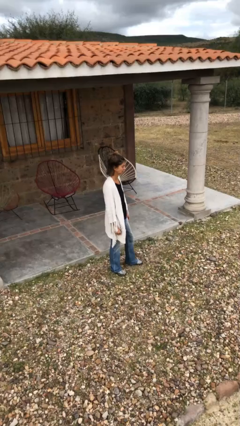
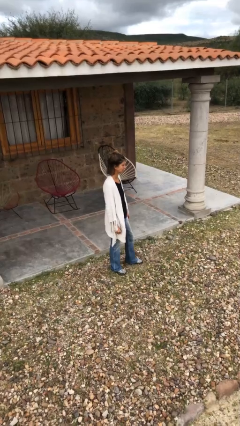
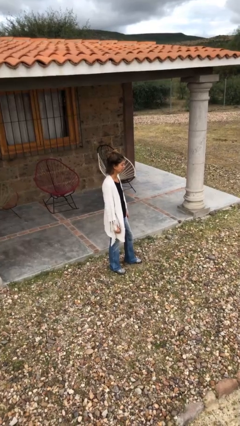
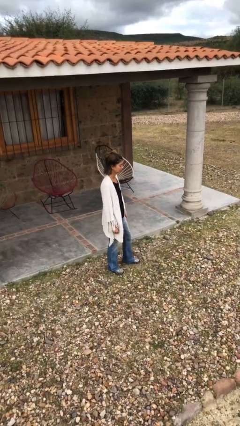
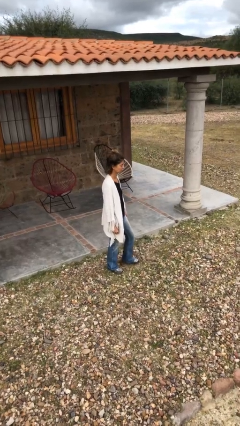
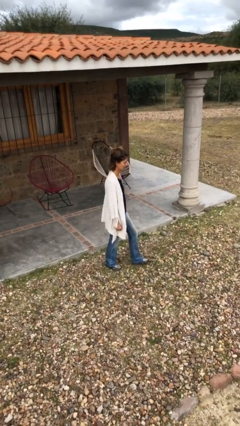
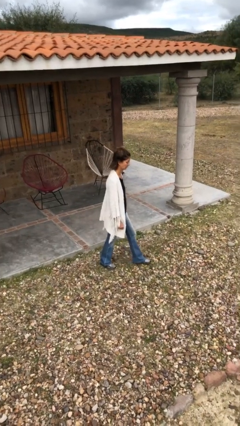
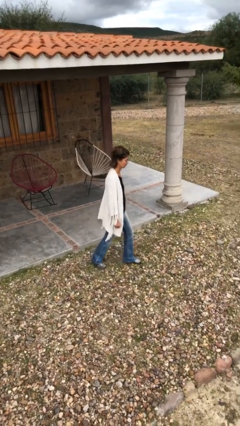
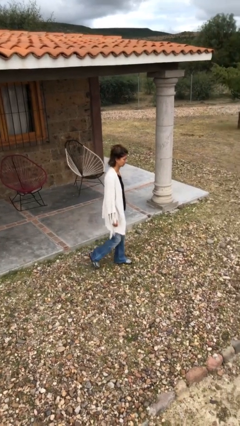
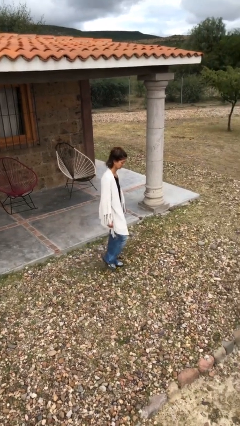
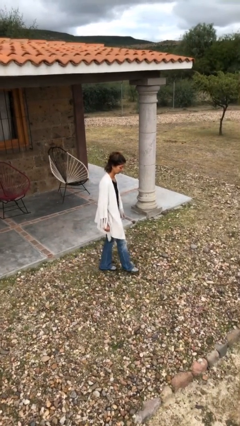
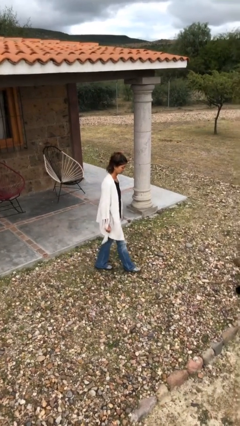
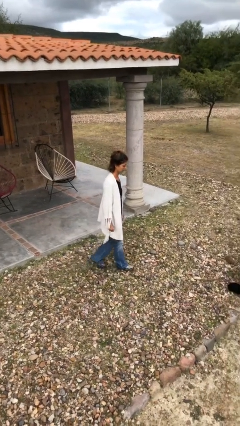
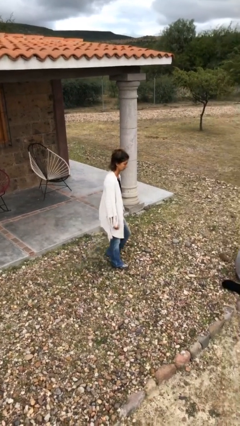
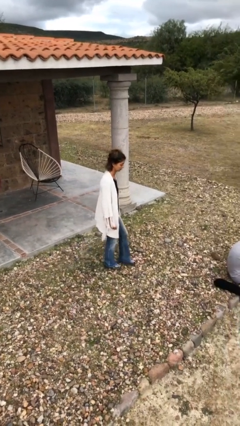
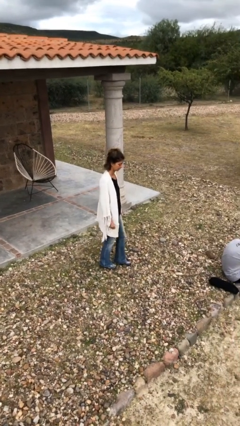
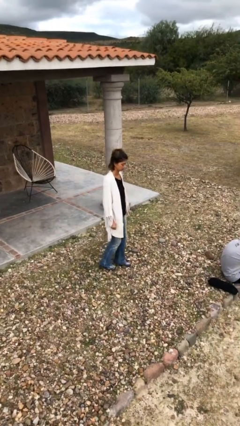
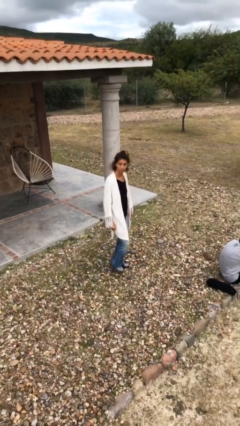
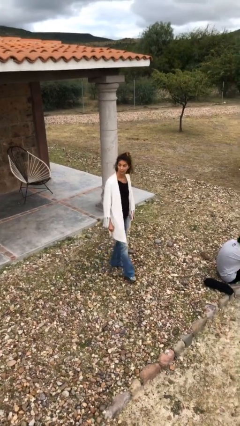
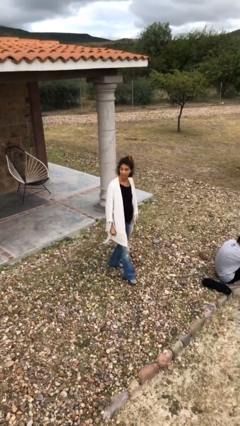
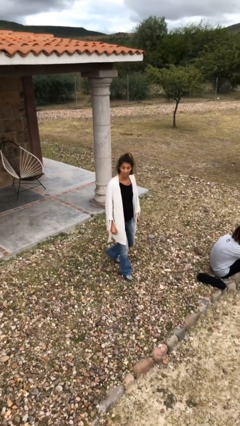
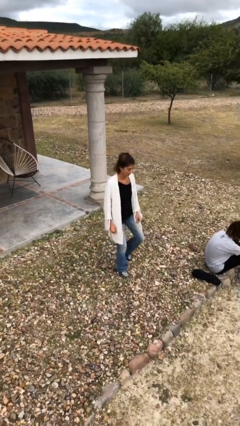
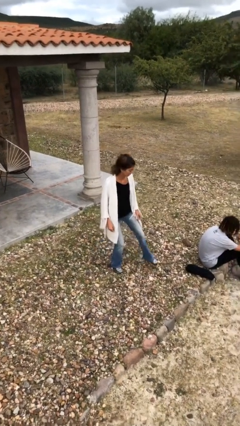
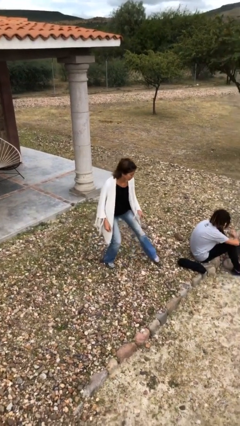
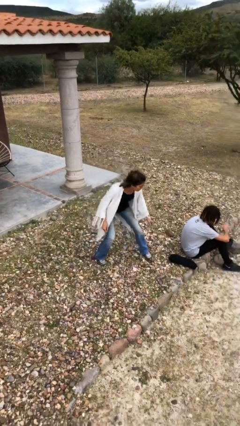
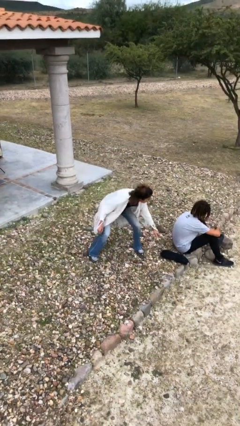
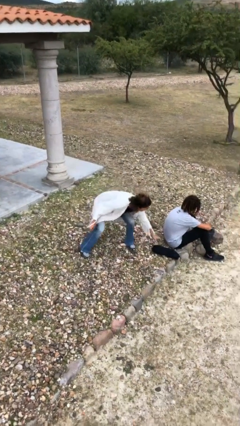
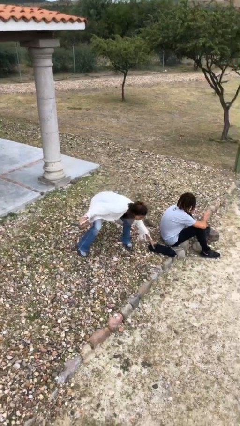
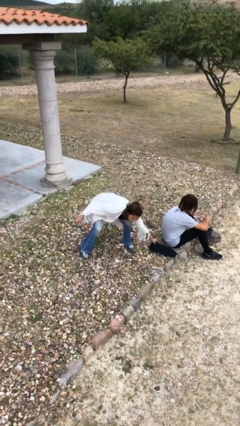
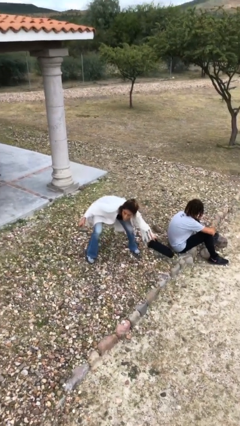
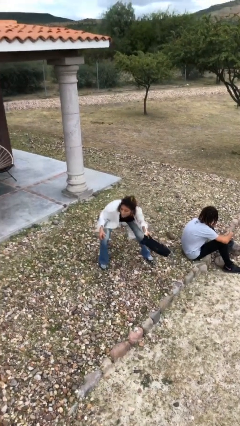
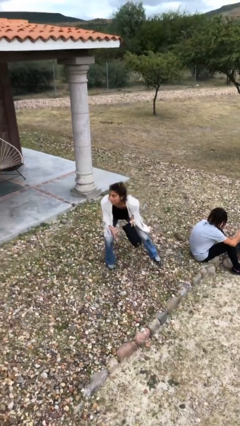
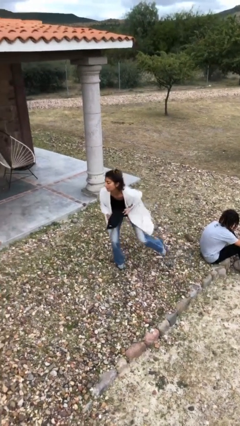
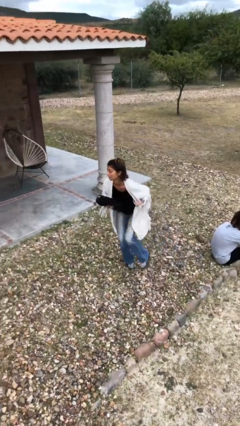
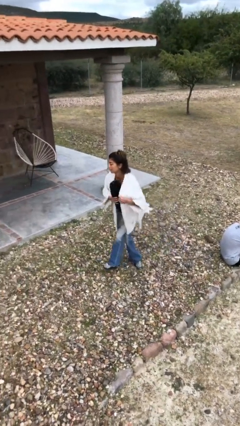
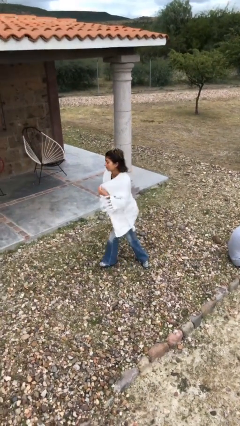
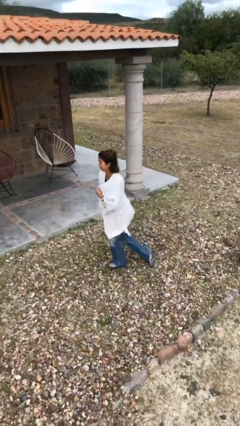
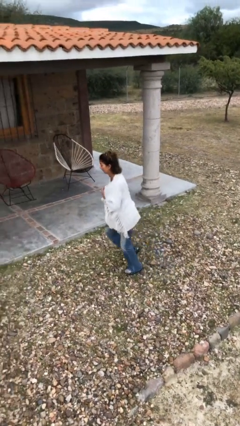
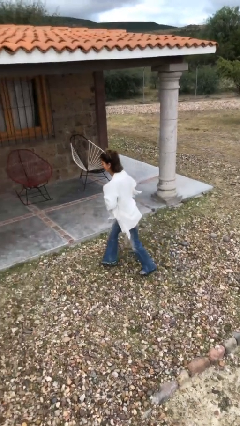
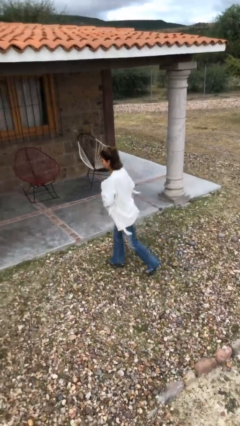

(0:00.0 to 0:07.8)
person steals object from person

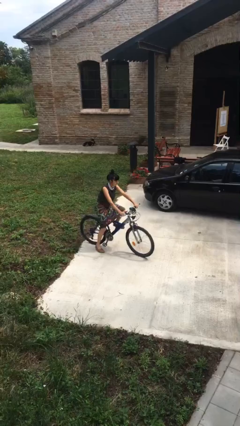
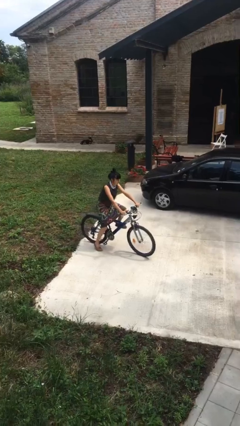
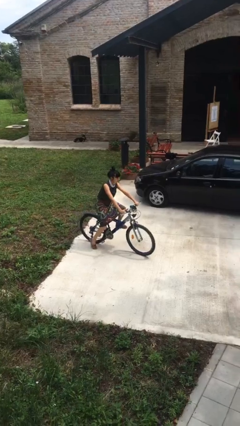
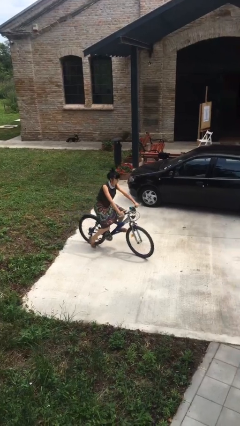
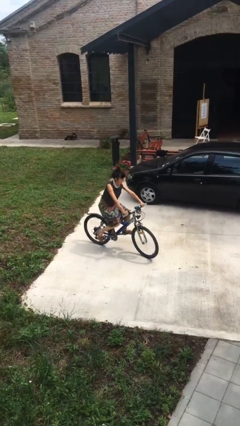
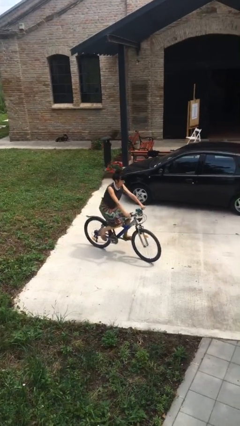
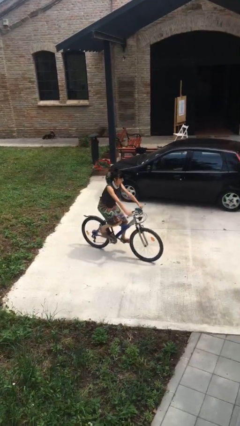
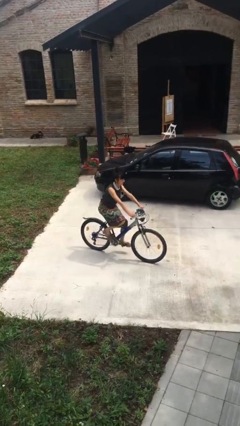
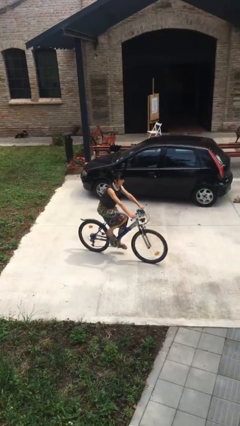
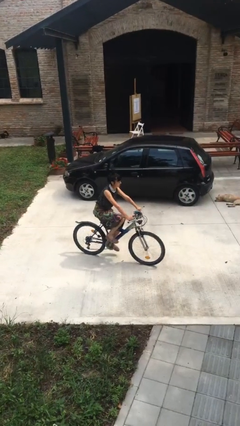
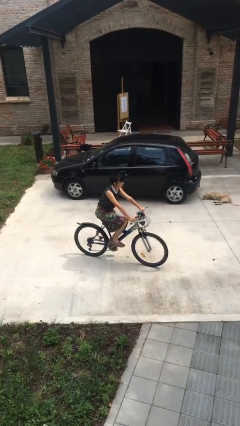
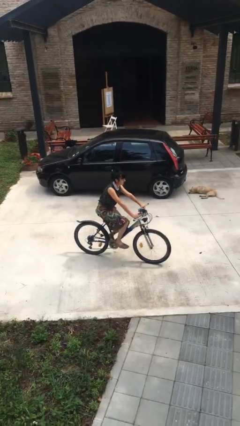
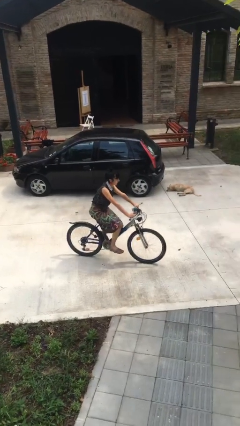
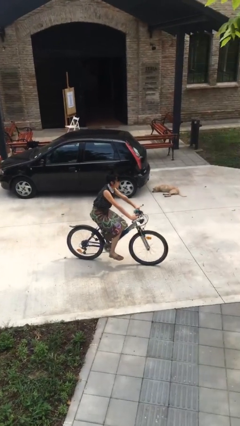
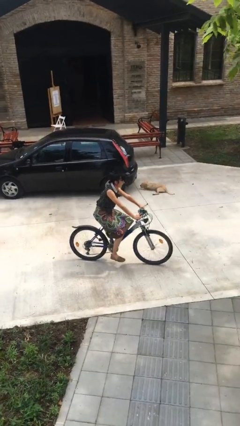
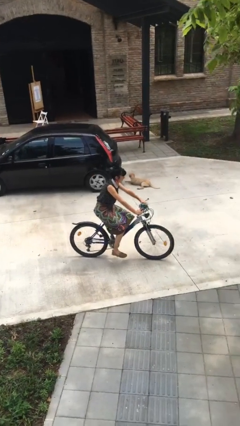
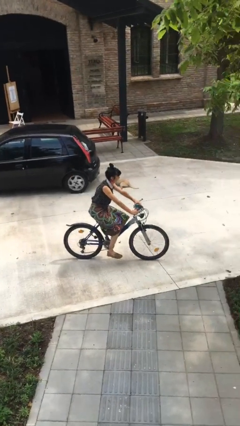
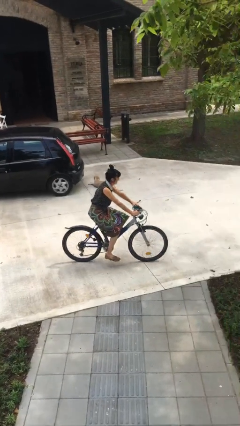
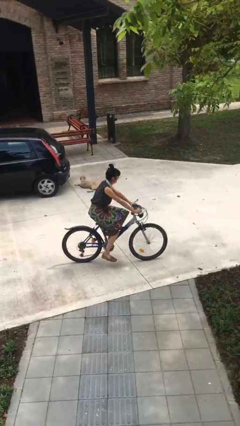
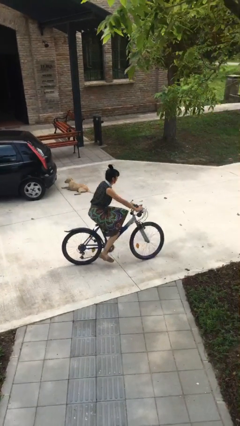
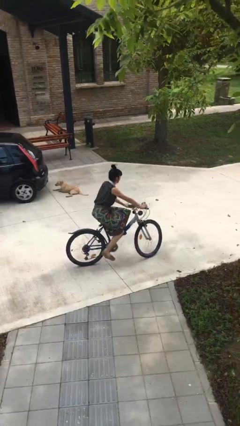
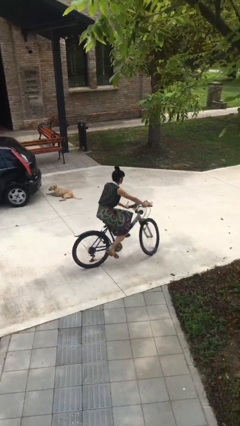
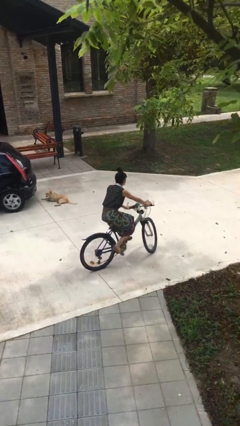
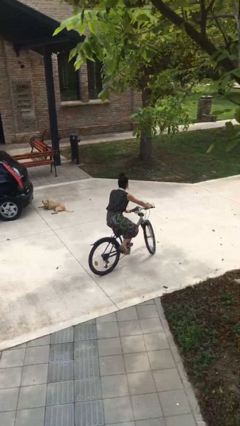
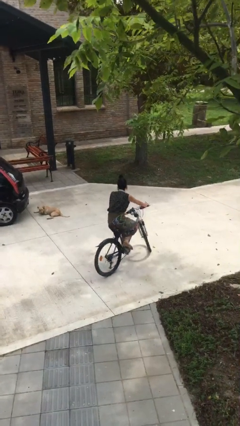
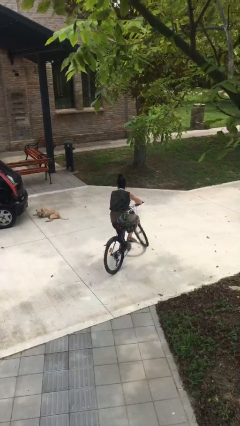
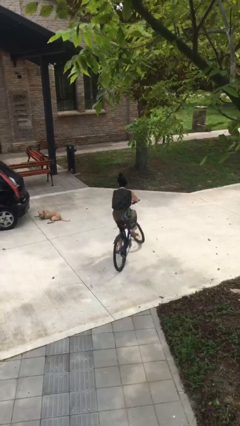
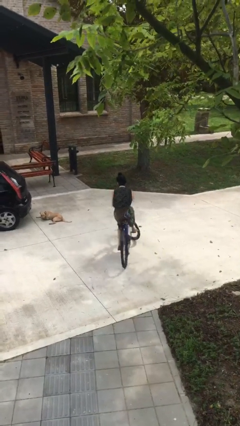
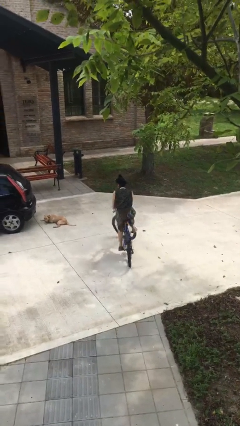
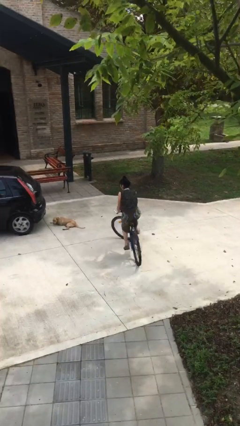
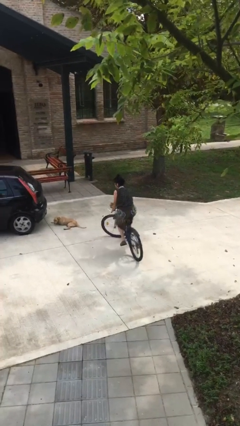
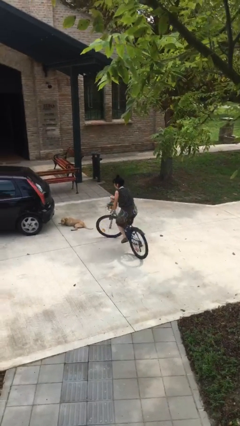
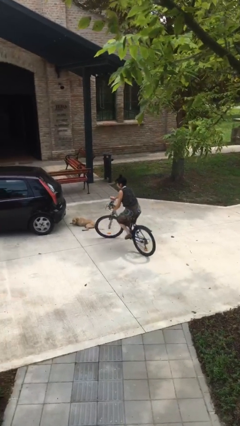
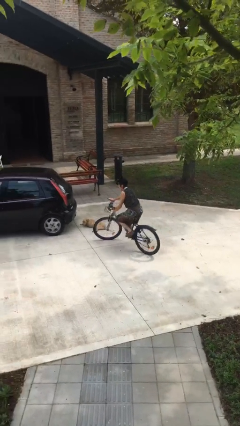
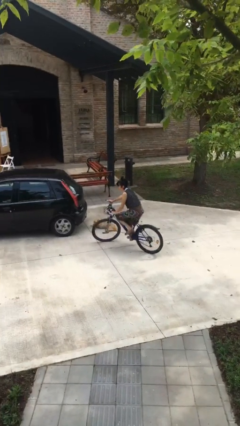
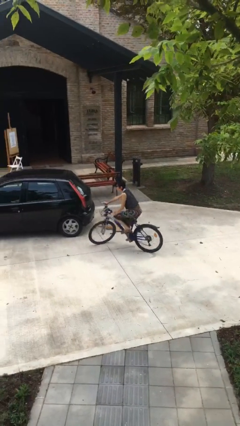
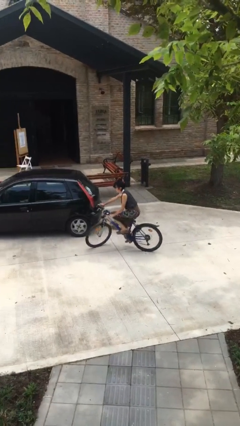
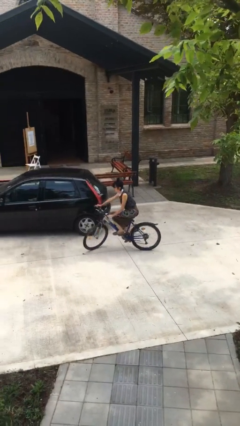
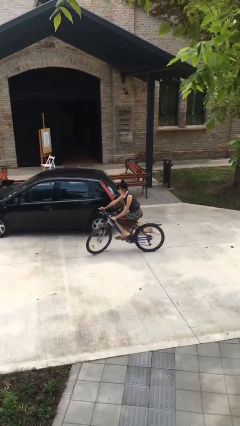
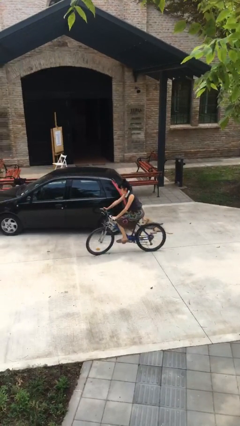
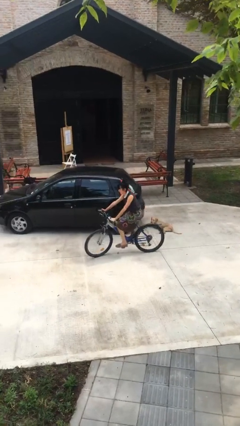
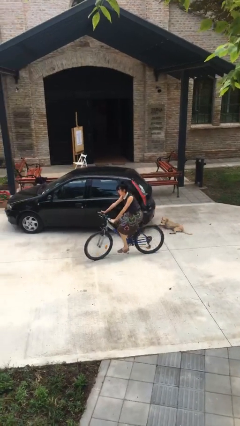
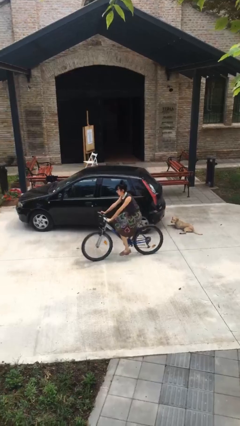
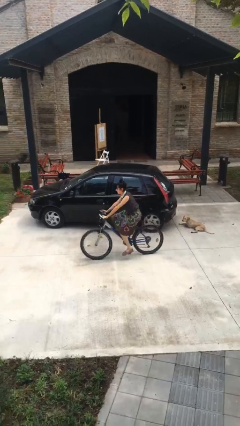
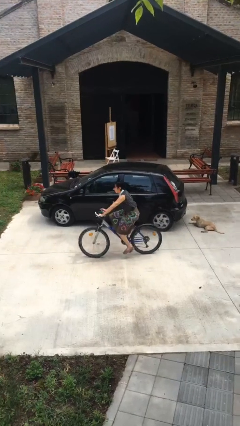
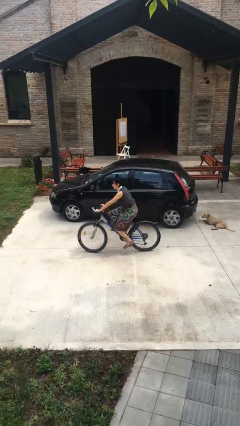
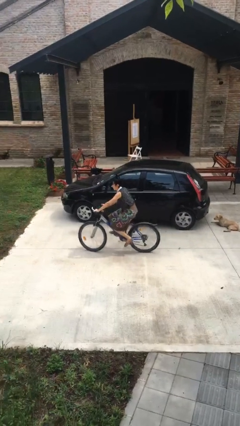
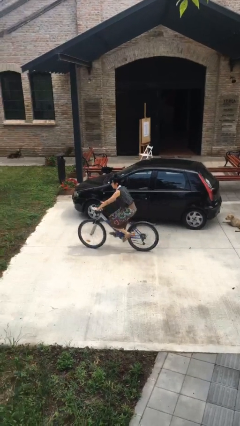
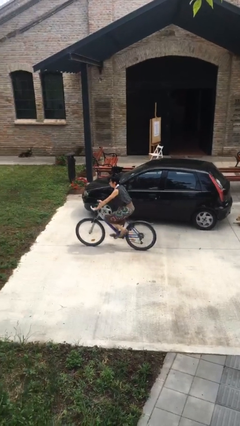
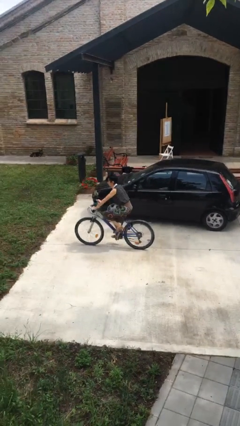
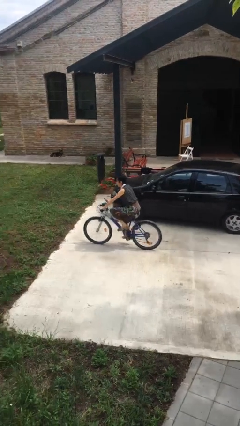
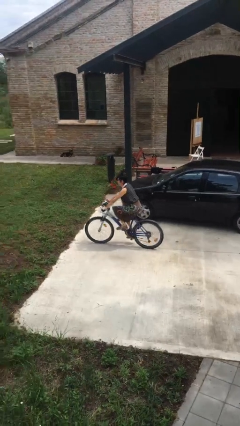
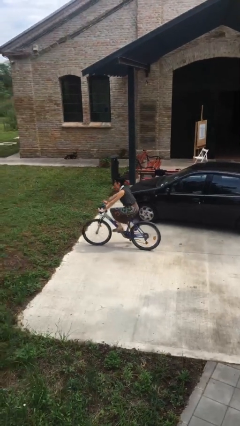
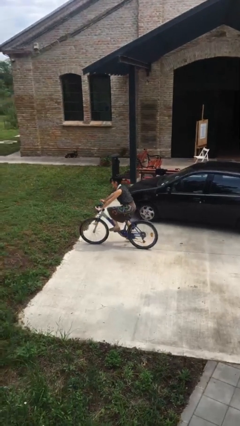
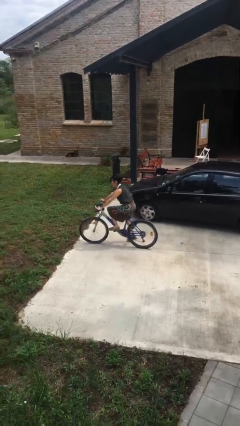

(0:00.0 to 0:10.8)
person rides bicycle
